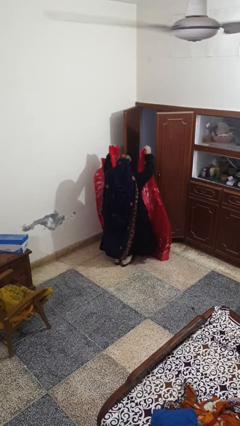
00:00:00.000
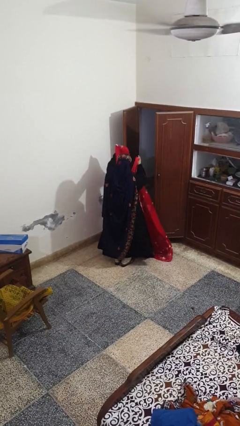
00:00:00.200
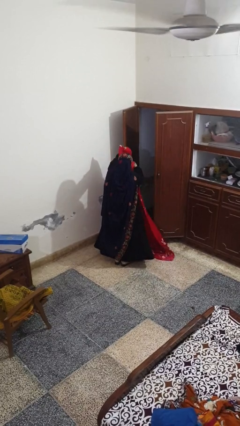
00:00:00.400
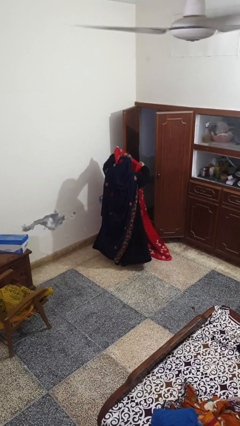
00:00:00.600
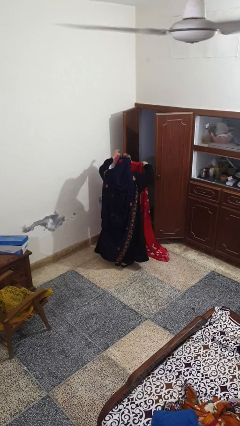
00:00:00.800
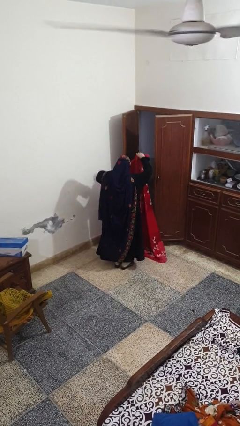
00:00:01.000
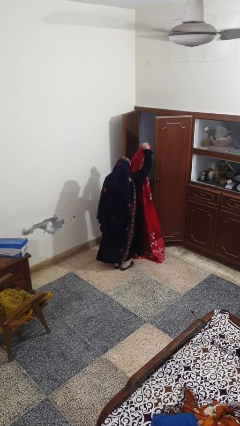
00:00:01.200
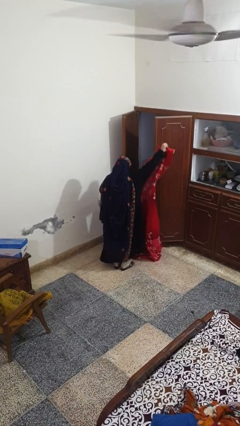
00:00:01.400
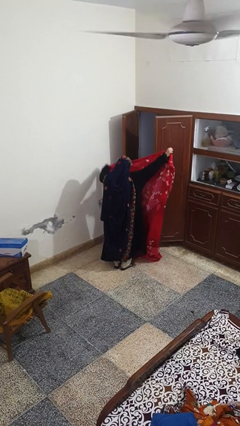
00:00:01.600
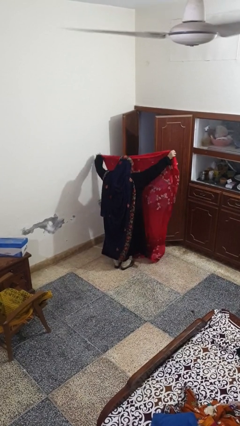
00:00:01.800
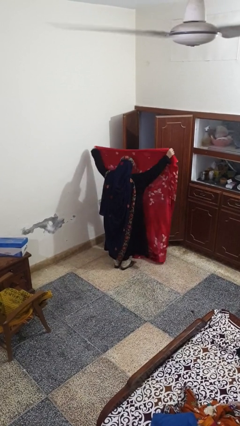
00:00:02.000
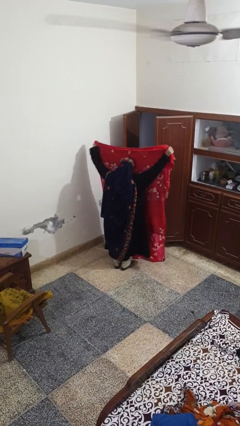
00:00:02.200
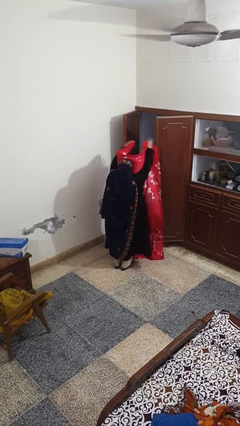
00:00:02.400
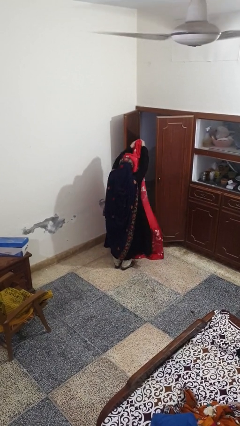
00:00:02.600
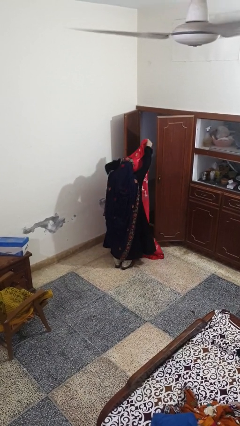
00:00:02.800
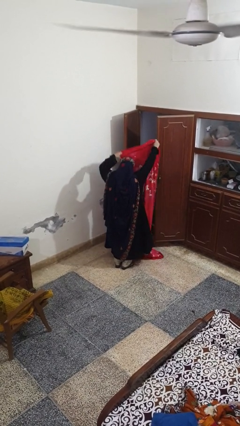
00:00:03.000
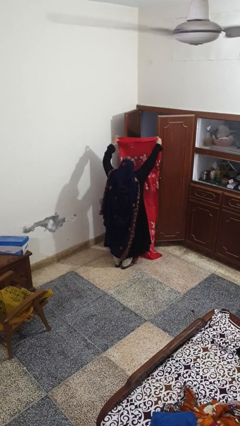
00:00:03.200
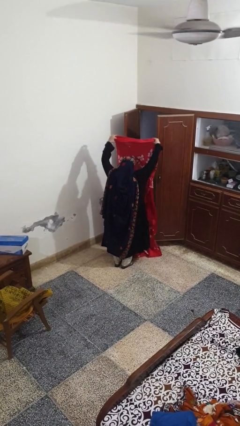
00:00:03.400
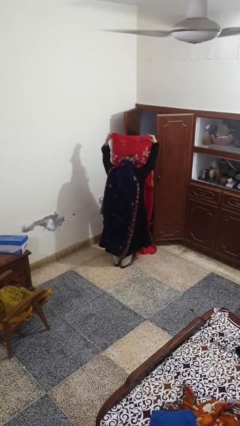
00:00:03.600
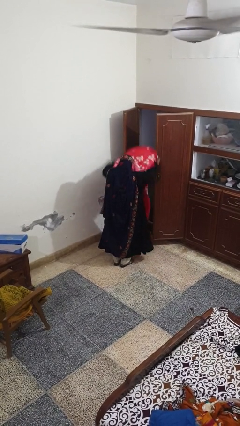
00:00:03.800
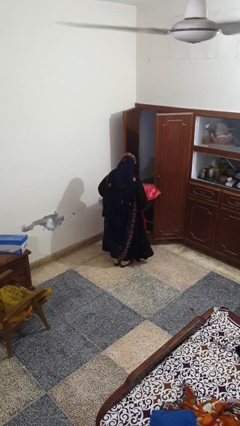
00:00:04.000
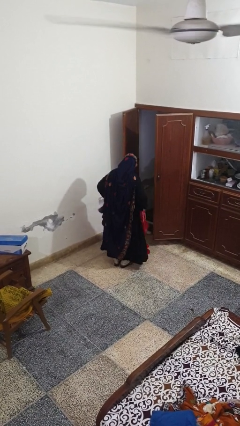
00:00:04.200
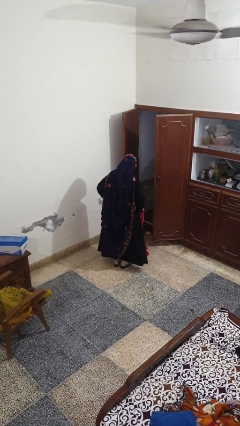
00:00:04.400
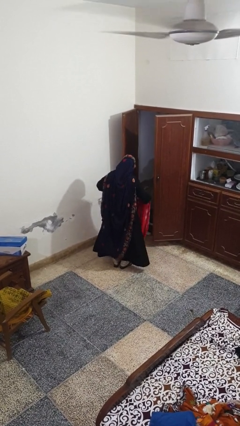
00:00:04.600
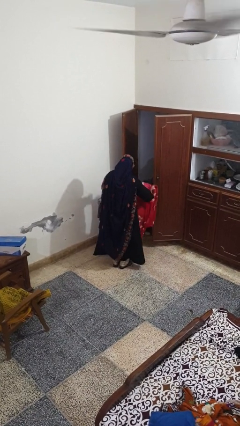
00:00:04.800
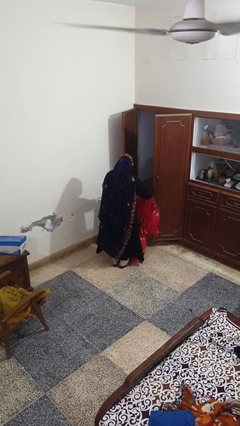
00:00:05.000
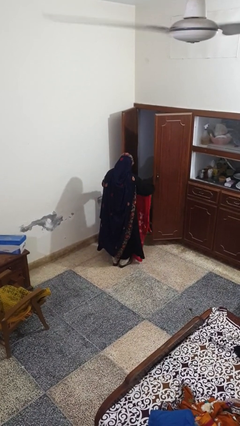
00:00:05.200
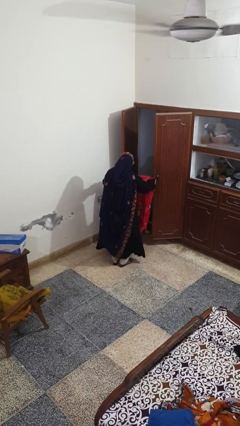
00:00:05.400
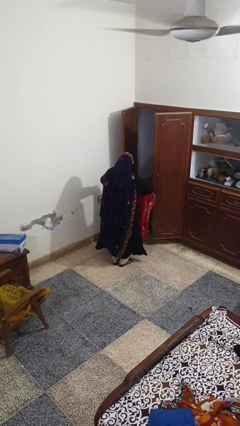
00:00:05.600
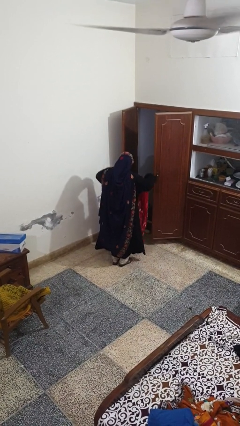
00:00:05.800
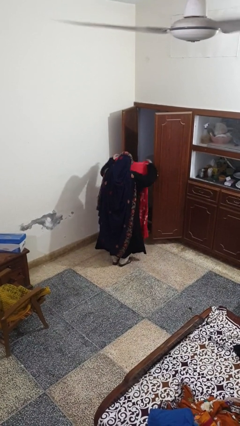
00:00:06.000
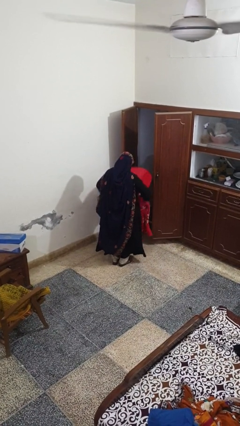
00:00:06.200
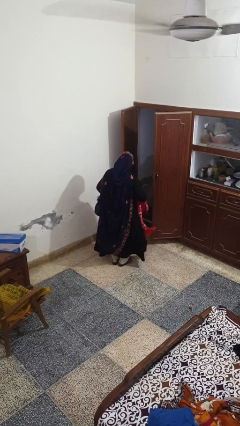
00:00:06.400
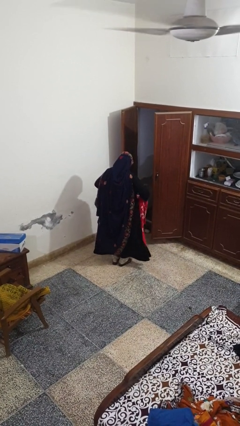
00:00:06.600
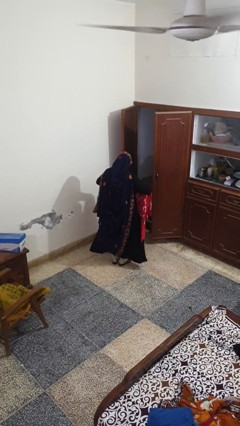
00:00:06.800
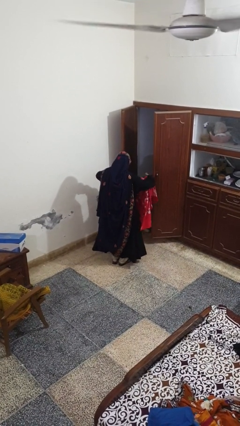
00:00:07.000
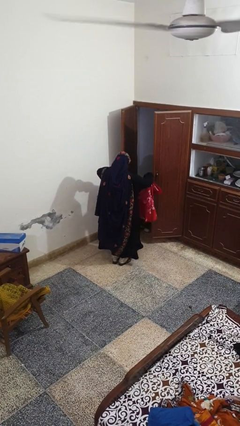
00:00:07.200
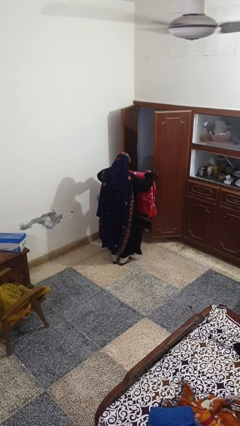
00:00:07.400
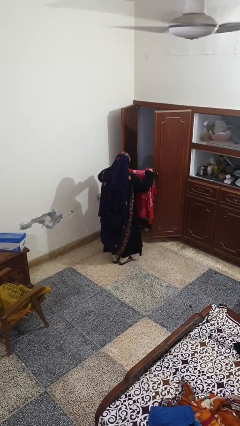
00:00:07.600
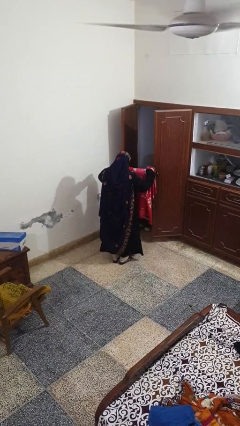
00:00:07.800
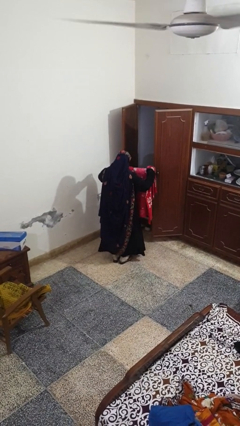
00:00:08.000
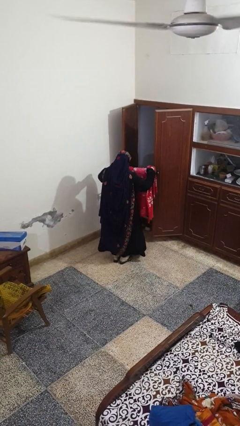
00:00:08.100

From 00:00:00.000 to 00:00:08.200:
person folds blanket

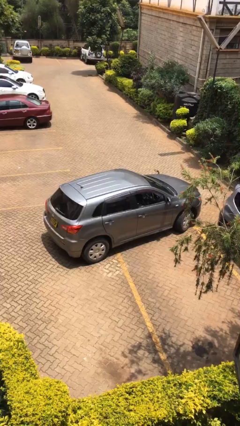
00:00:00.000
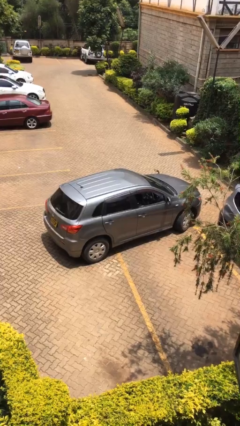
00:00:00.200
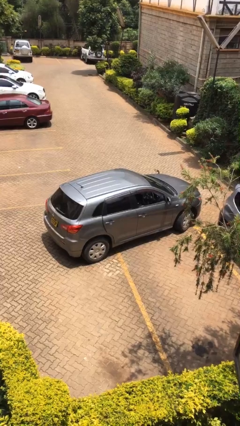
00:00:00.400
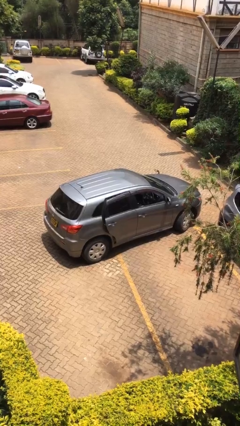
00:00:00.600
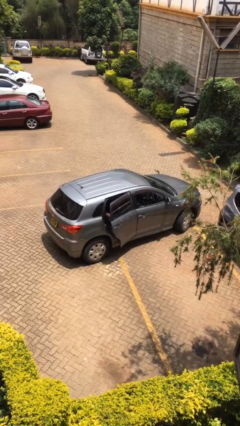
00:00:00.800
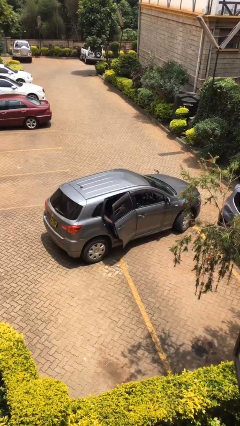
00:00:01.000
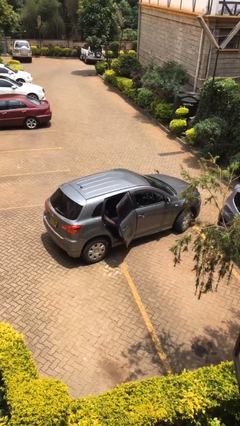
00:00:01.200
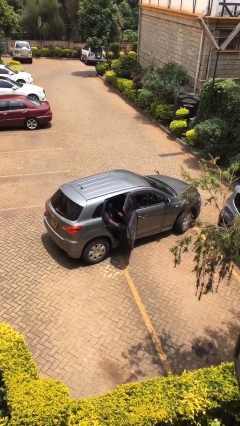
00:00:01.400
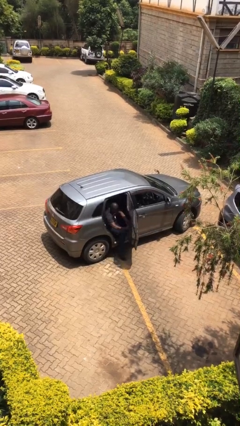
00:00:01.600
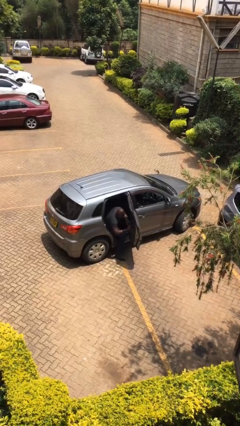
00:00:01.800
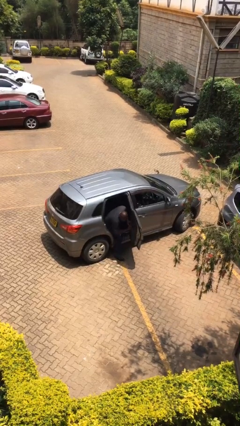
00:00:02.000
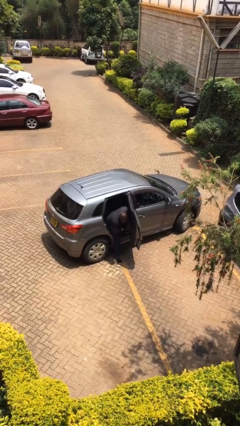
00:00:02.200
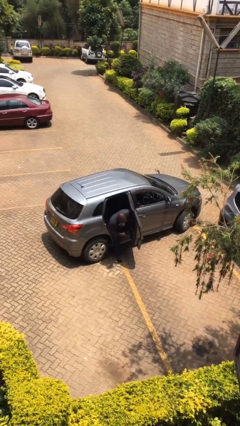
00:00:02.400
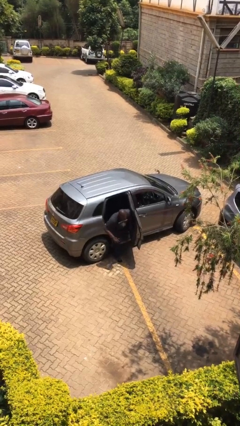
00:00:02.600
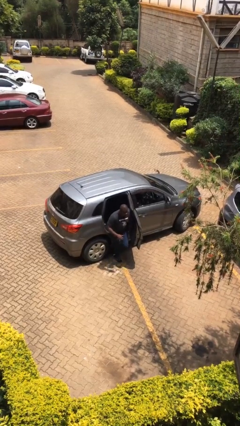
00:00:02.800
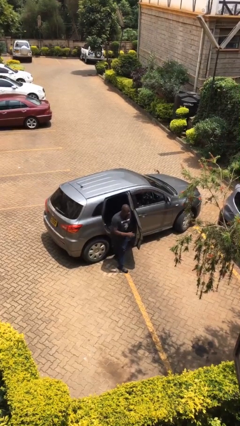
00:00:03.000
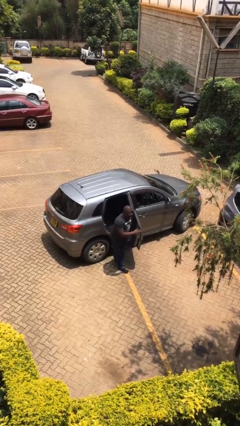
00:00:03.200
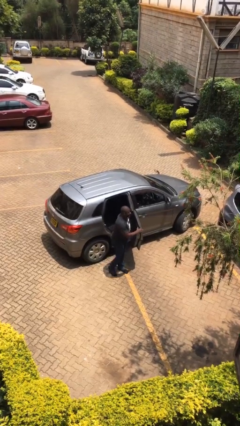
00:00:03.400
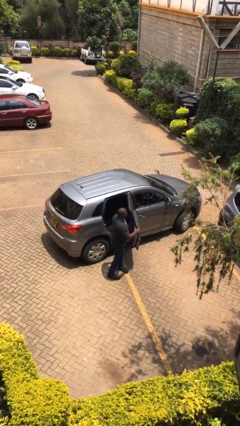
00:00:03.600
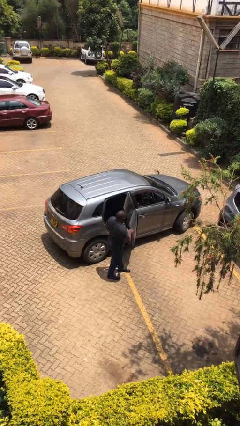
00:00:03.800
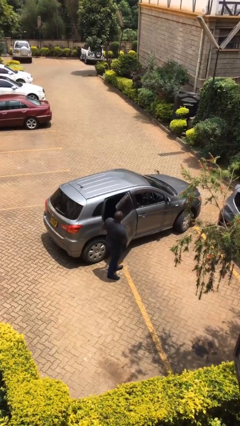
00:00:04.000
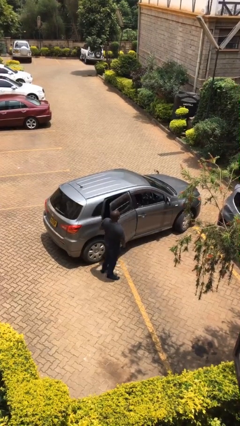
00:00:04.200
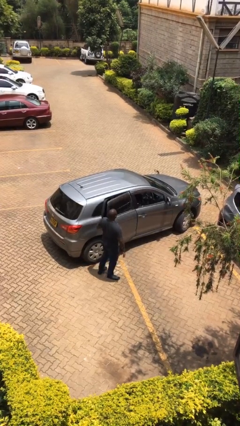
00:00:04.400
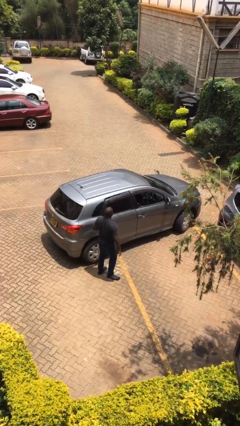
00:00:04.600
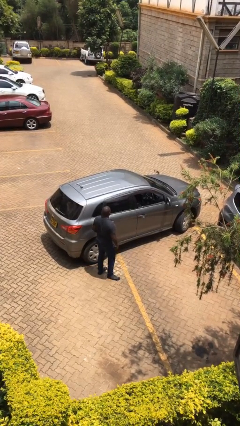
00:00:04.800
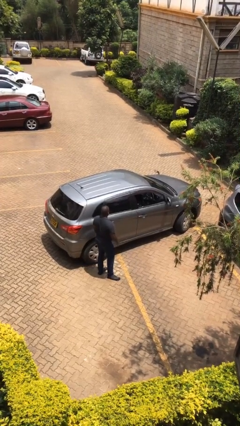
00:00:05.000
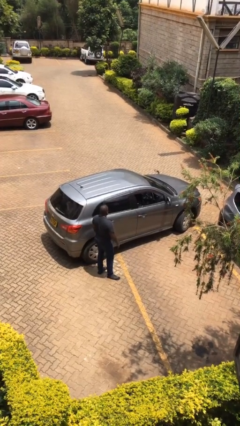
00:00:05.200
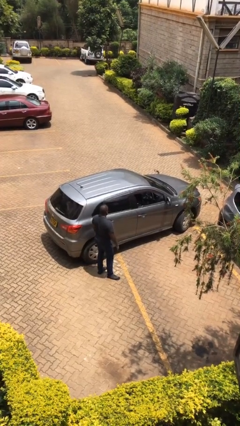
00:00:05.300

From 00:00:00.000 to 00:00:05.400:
car drops off person

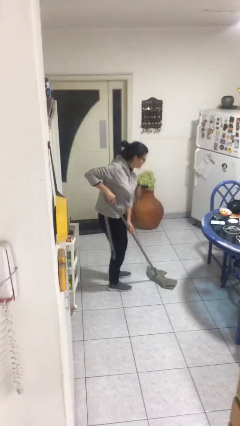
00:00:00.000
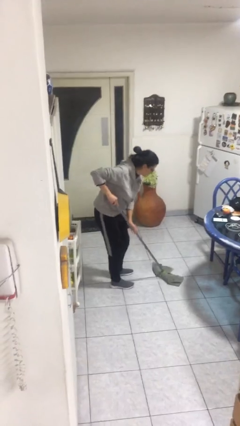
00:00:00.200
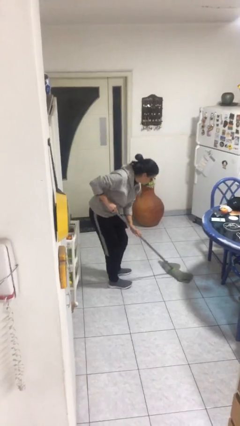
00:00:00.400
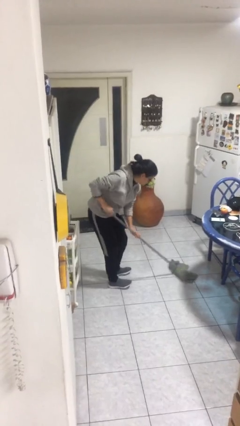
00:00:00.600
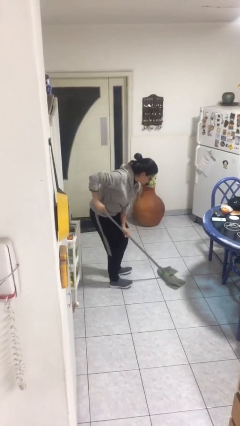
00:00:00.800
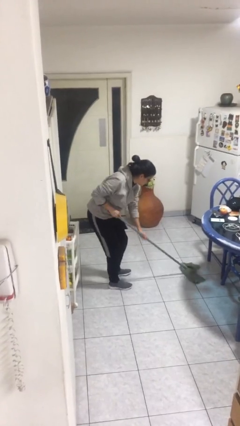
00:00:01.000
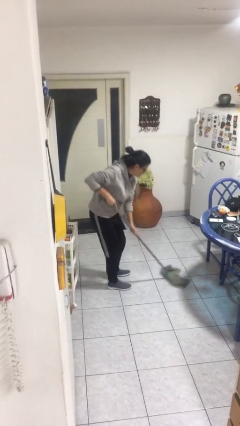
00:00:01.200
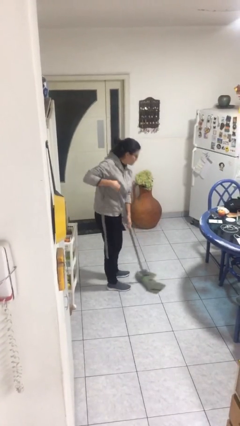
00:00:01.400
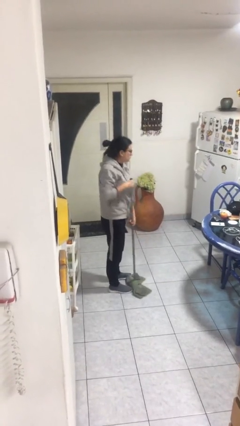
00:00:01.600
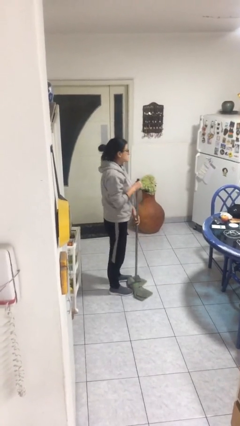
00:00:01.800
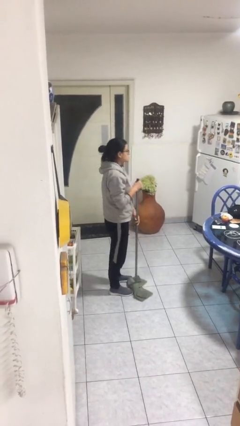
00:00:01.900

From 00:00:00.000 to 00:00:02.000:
person sweeps floor

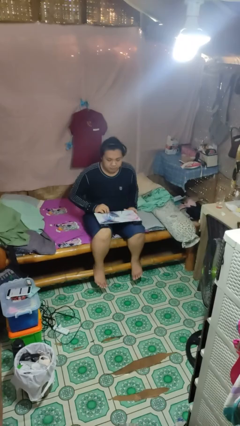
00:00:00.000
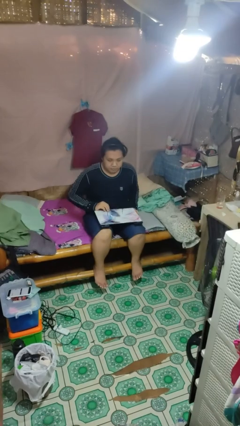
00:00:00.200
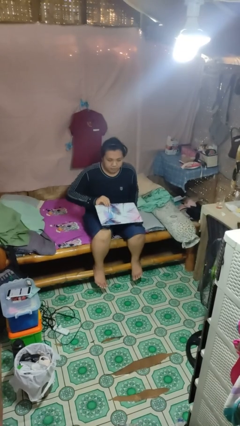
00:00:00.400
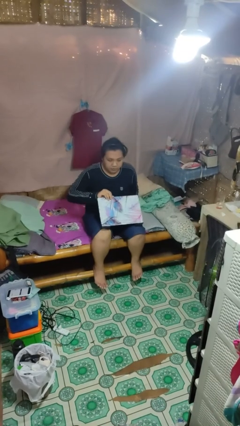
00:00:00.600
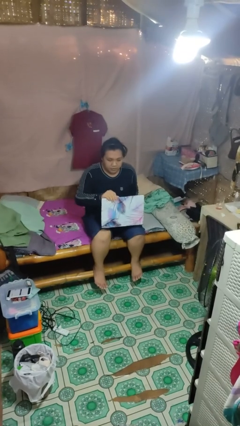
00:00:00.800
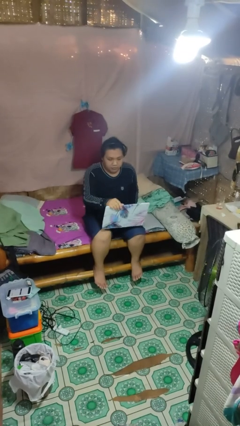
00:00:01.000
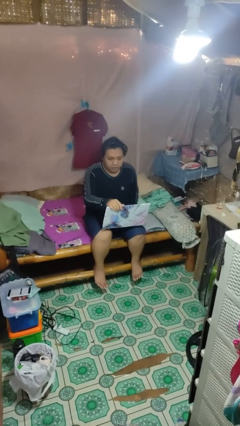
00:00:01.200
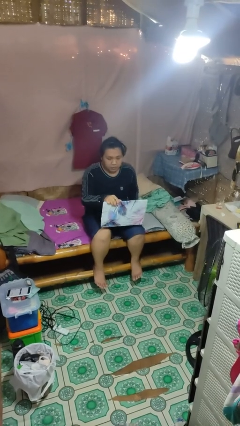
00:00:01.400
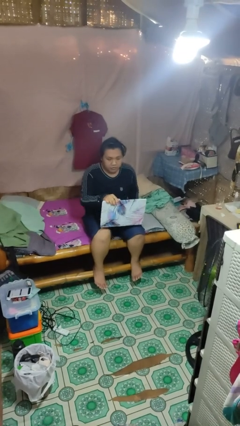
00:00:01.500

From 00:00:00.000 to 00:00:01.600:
person opens laptop
